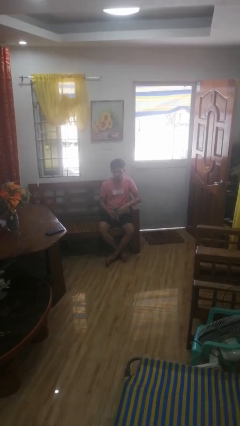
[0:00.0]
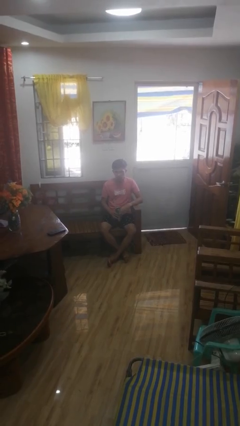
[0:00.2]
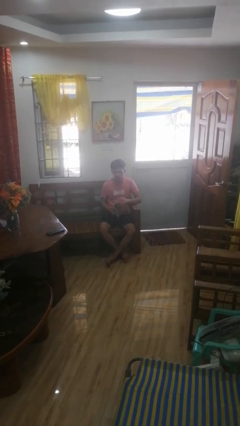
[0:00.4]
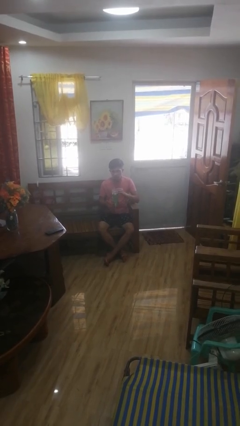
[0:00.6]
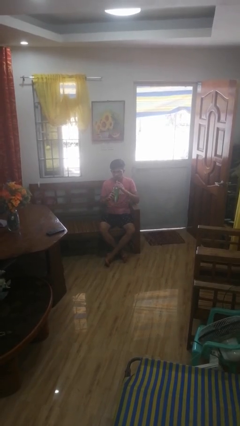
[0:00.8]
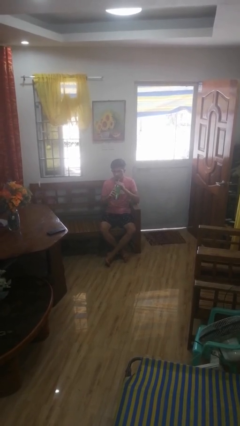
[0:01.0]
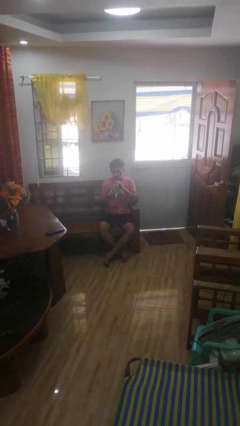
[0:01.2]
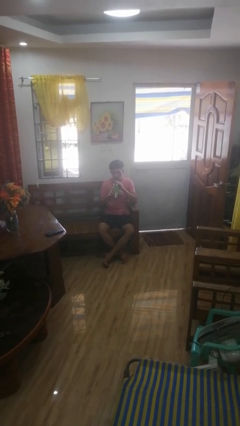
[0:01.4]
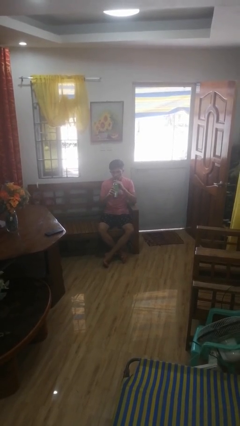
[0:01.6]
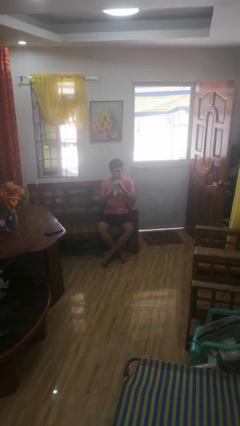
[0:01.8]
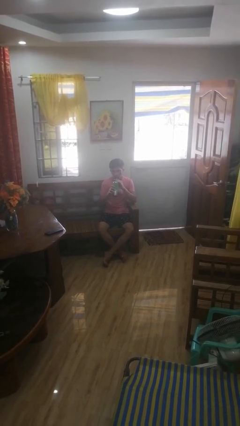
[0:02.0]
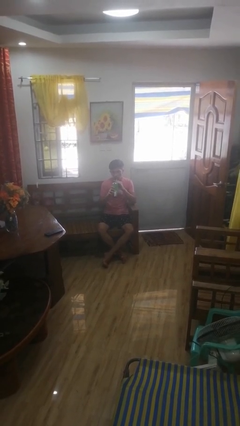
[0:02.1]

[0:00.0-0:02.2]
person drinks from straw

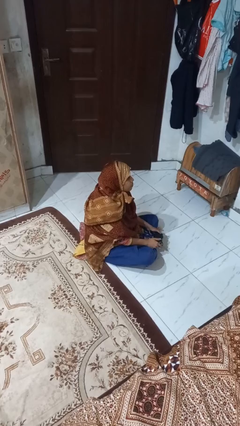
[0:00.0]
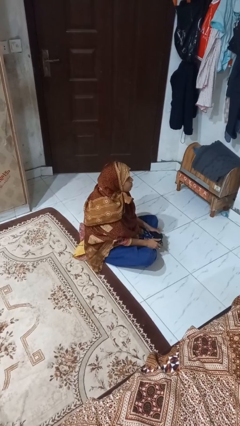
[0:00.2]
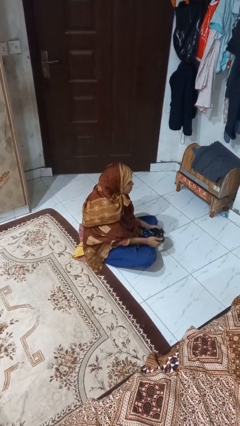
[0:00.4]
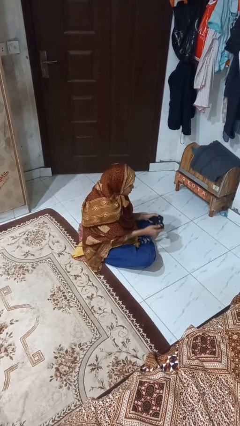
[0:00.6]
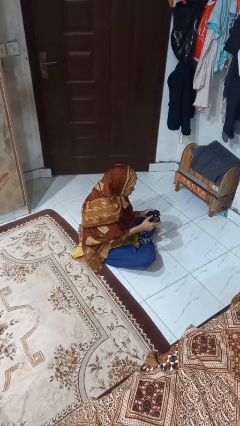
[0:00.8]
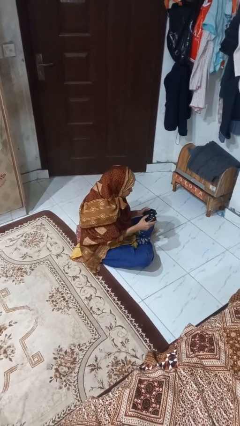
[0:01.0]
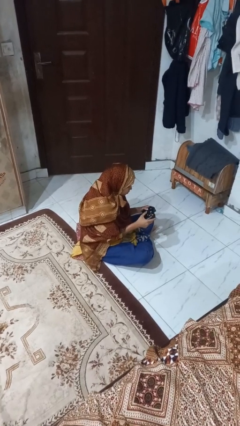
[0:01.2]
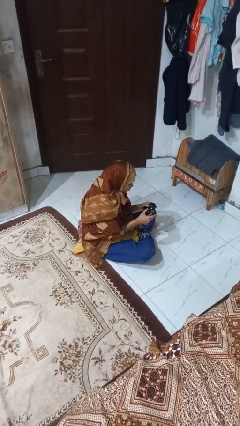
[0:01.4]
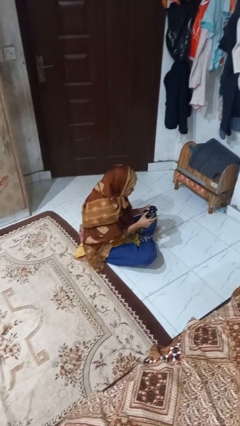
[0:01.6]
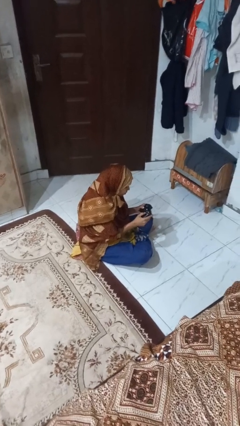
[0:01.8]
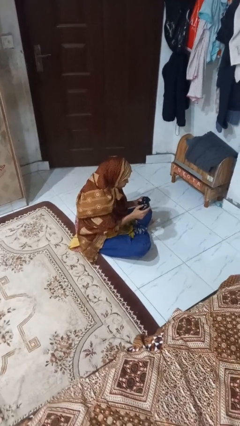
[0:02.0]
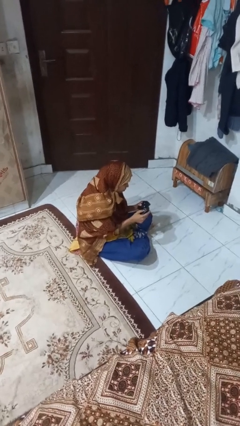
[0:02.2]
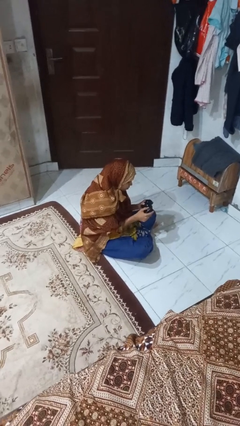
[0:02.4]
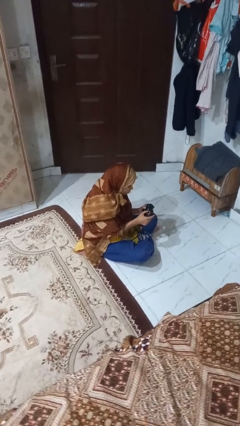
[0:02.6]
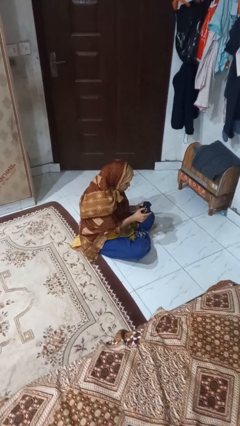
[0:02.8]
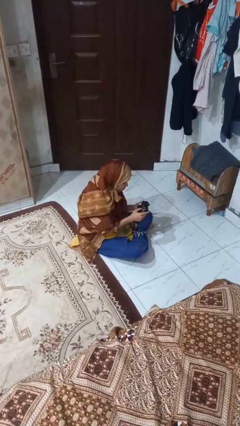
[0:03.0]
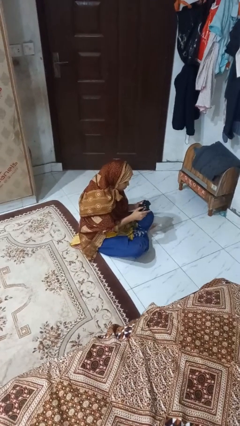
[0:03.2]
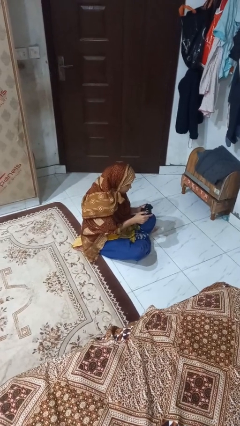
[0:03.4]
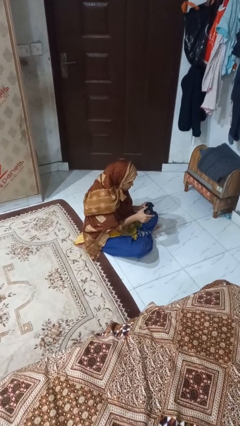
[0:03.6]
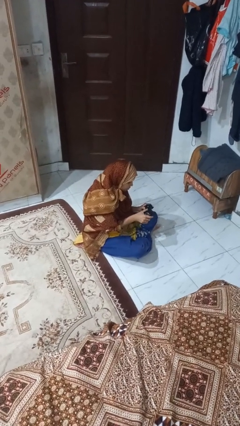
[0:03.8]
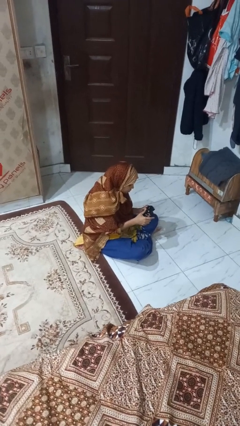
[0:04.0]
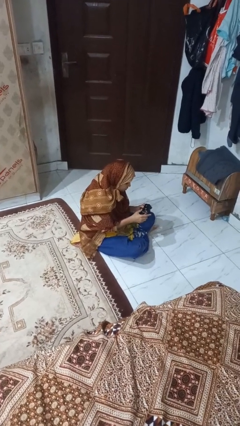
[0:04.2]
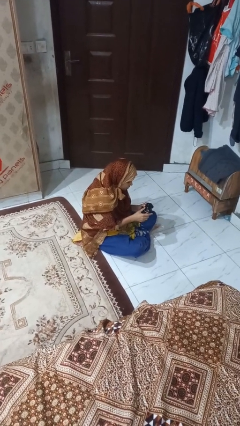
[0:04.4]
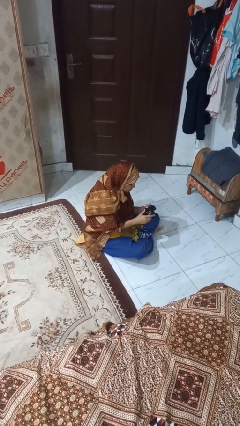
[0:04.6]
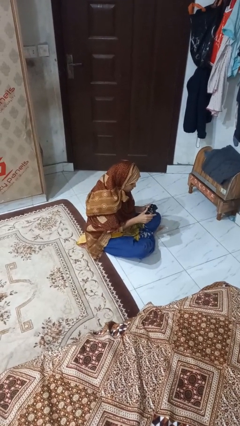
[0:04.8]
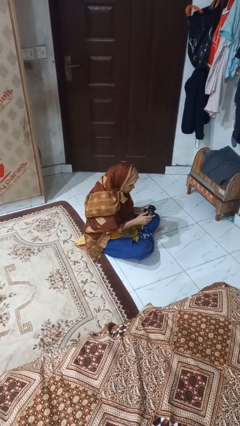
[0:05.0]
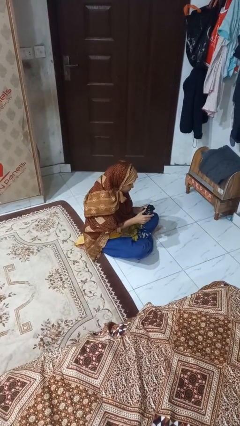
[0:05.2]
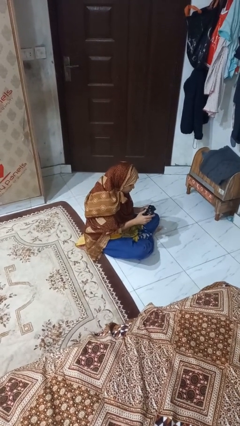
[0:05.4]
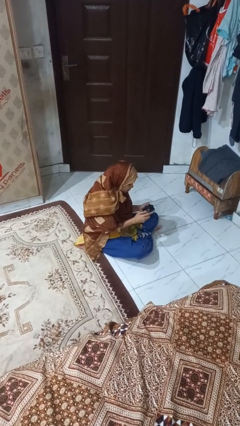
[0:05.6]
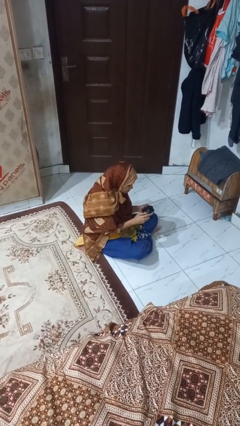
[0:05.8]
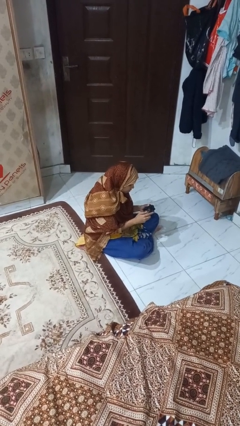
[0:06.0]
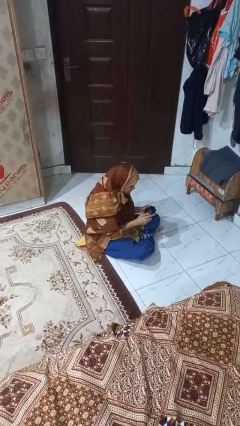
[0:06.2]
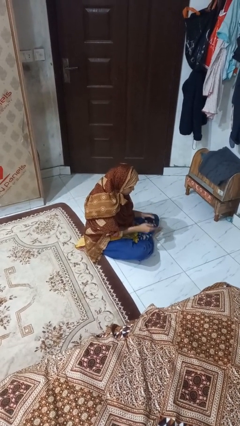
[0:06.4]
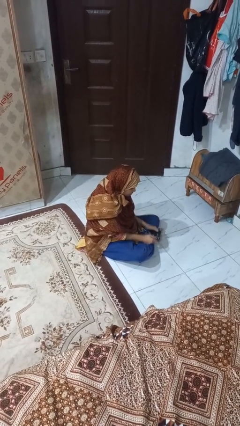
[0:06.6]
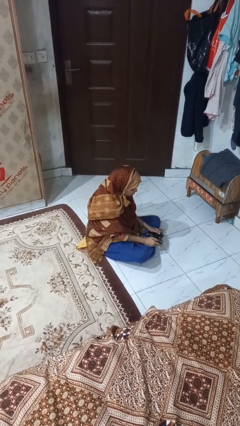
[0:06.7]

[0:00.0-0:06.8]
person interacts with handheld game

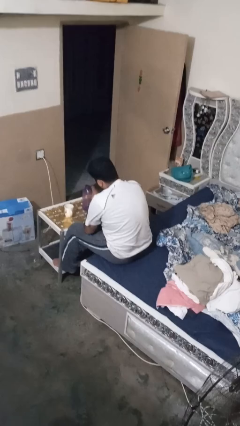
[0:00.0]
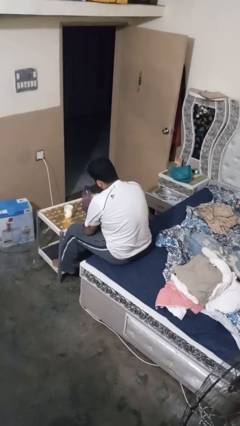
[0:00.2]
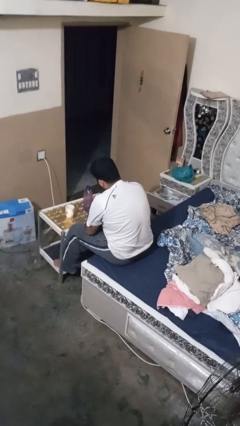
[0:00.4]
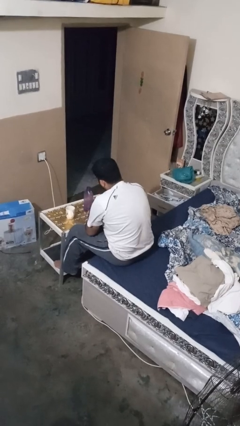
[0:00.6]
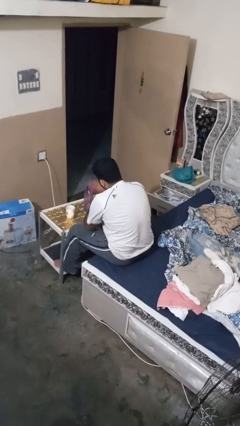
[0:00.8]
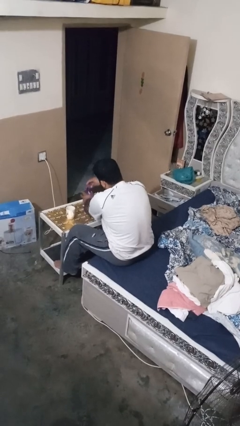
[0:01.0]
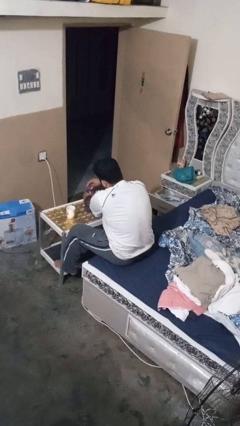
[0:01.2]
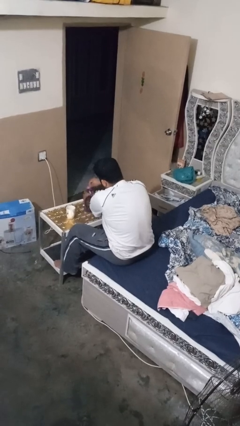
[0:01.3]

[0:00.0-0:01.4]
person screws lid to bottle

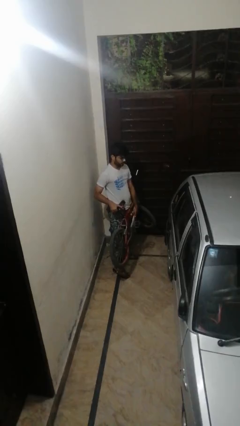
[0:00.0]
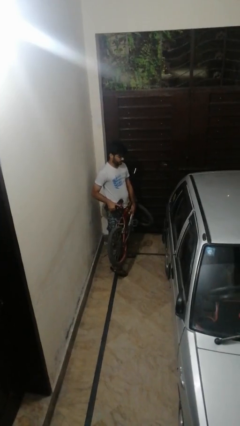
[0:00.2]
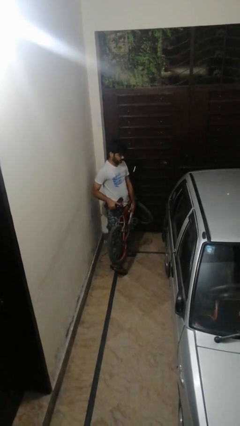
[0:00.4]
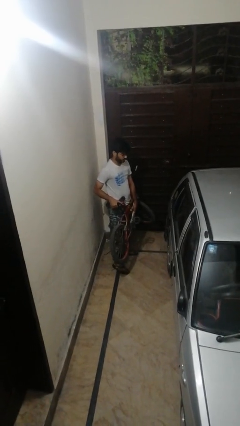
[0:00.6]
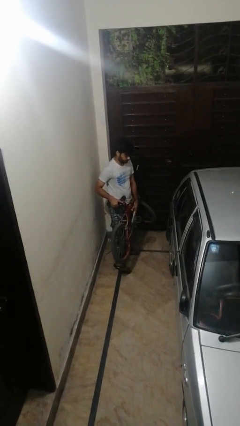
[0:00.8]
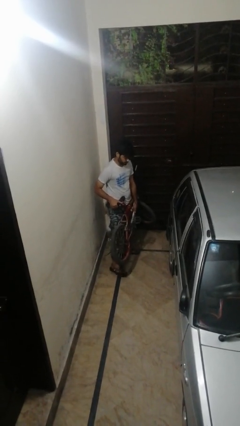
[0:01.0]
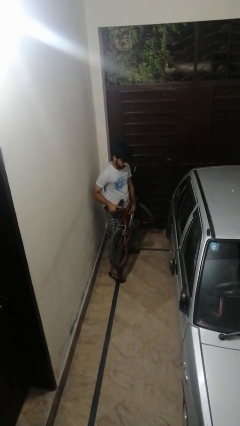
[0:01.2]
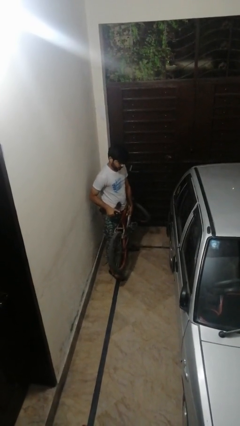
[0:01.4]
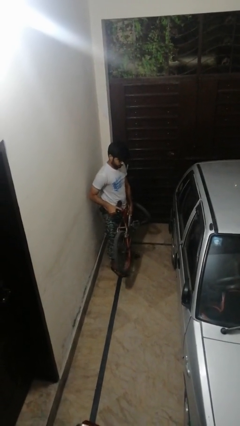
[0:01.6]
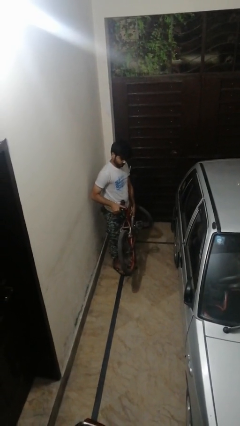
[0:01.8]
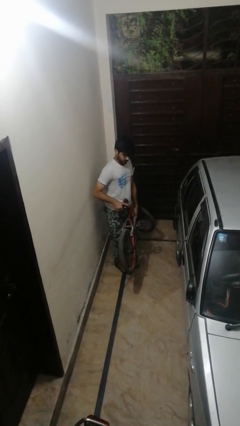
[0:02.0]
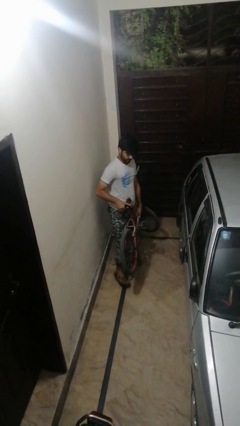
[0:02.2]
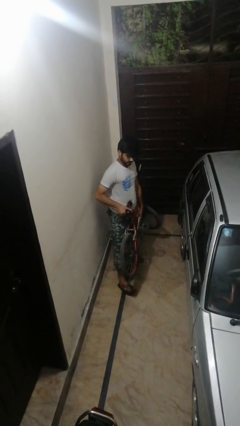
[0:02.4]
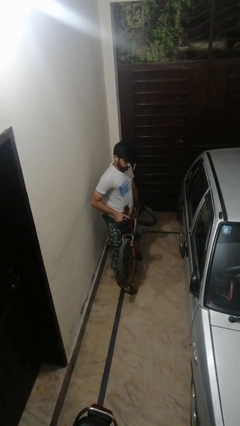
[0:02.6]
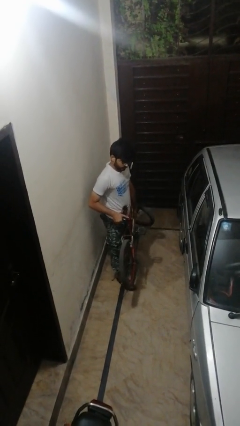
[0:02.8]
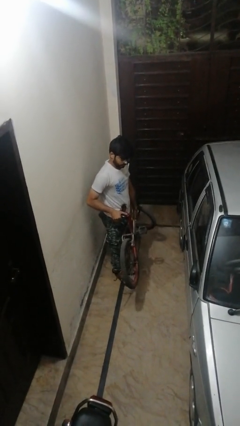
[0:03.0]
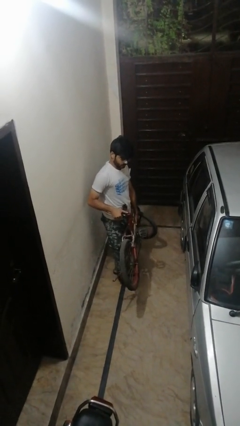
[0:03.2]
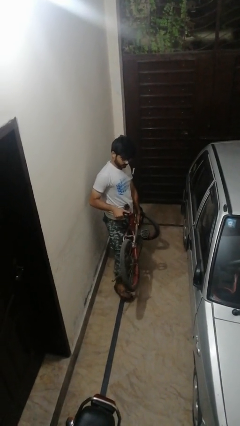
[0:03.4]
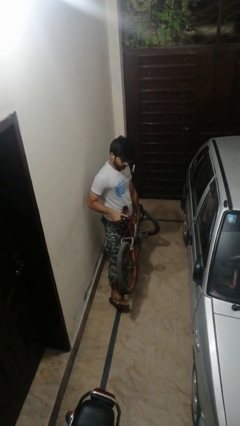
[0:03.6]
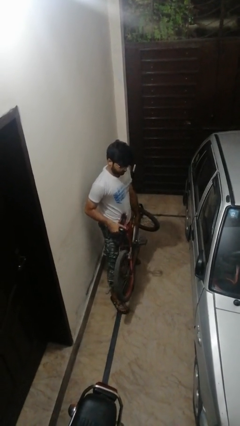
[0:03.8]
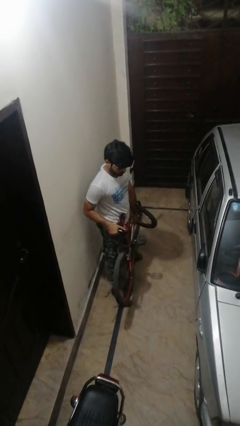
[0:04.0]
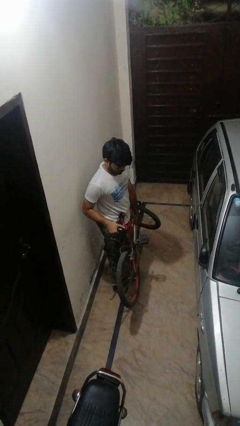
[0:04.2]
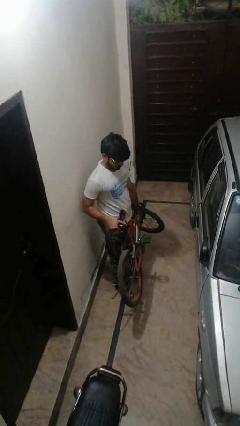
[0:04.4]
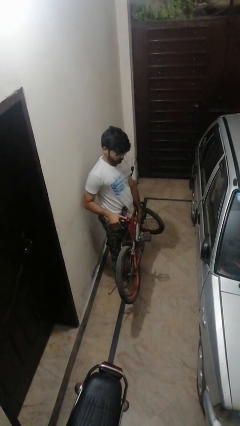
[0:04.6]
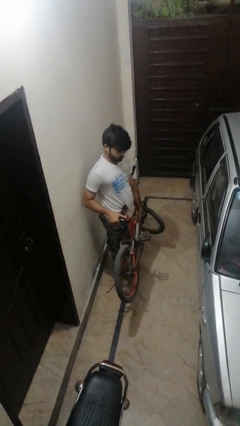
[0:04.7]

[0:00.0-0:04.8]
person carries bicycle

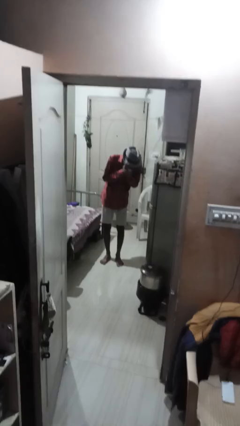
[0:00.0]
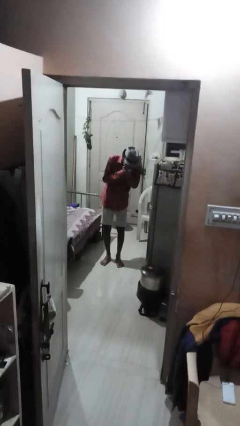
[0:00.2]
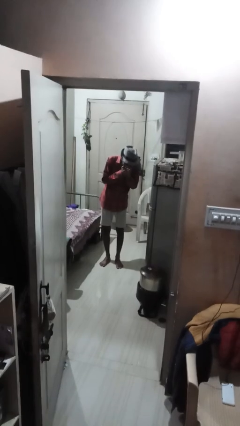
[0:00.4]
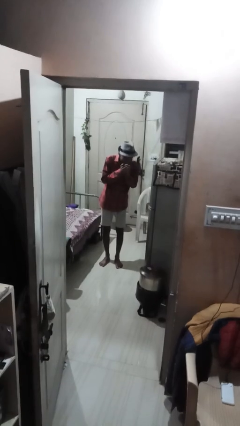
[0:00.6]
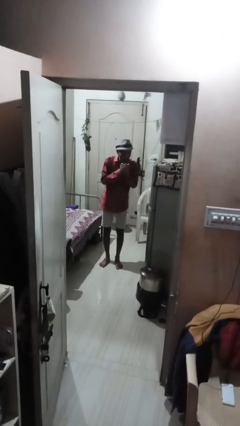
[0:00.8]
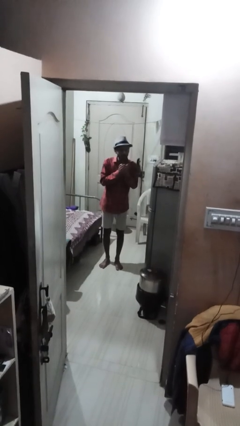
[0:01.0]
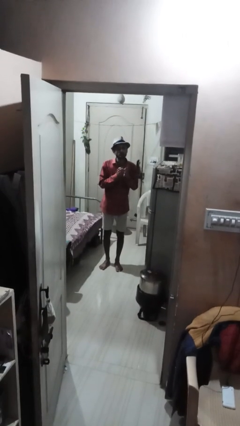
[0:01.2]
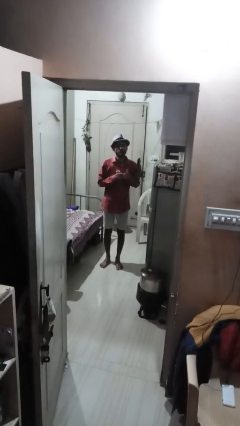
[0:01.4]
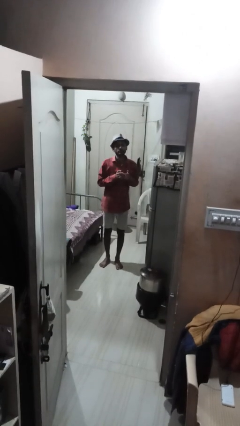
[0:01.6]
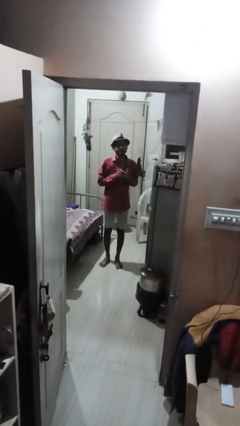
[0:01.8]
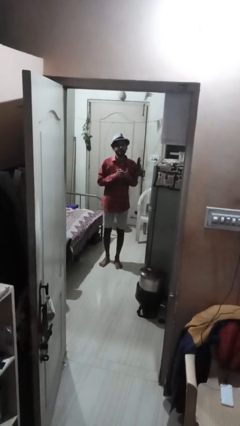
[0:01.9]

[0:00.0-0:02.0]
person sneezes into hand

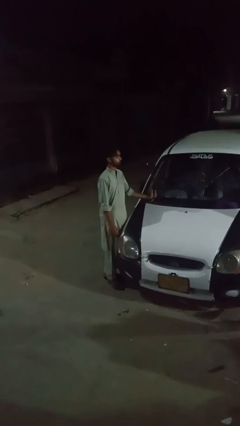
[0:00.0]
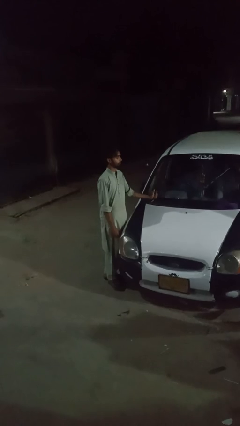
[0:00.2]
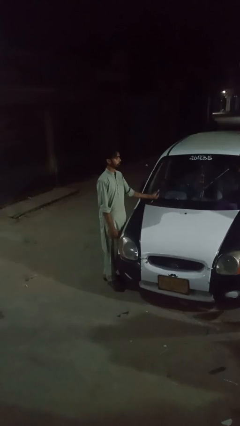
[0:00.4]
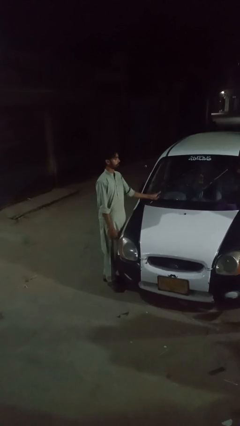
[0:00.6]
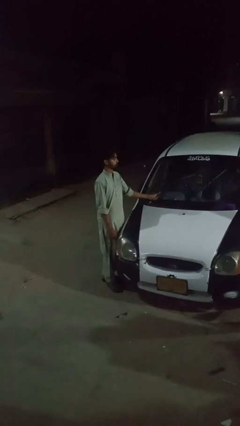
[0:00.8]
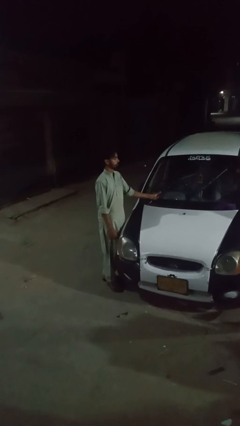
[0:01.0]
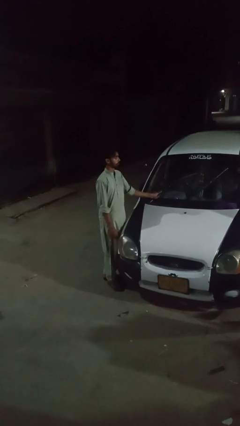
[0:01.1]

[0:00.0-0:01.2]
person flips down car wipers
